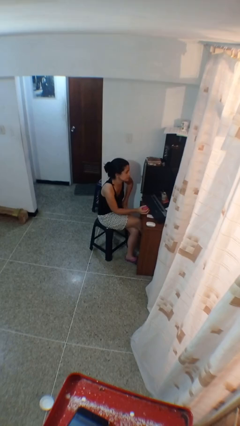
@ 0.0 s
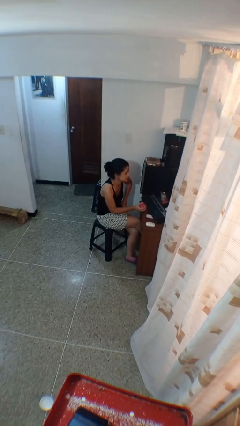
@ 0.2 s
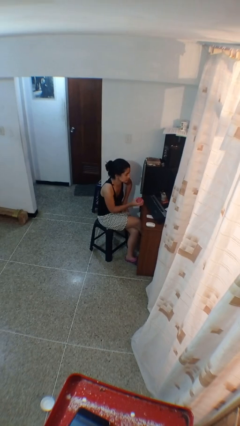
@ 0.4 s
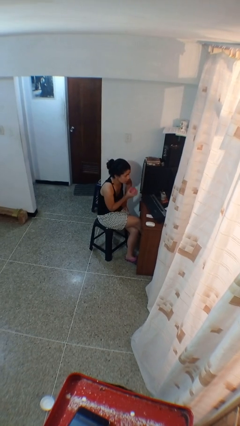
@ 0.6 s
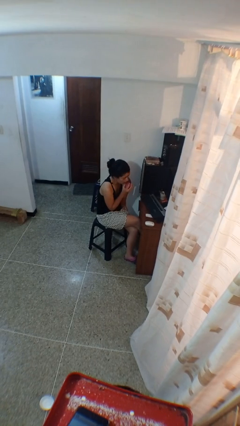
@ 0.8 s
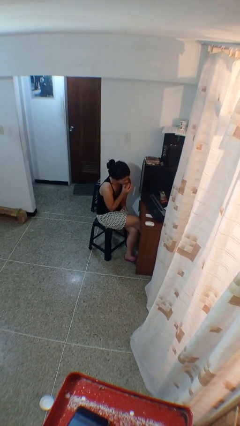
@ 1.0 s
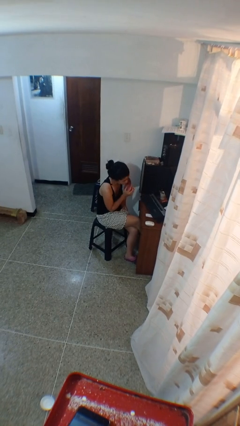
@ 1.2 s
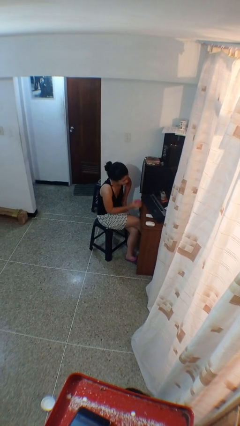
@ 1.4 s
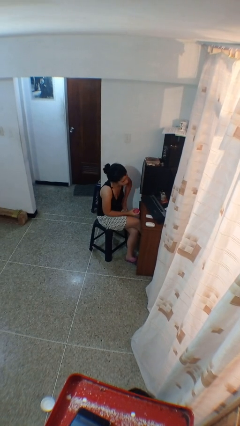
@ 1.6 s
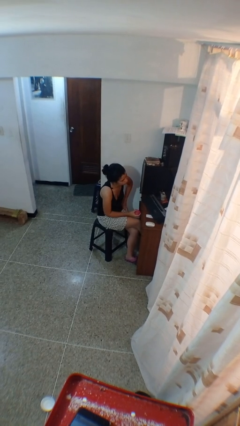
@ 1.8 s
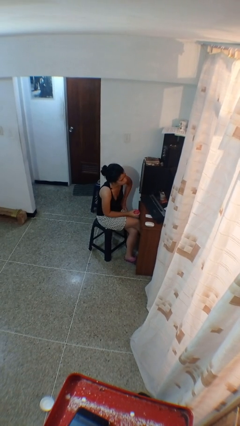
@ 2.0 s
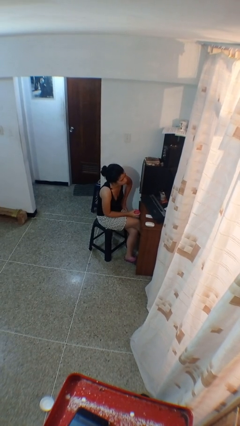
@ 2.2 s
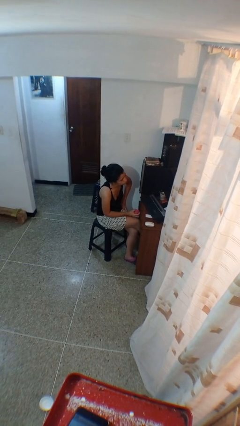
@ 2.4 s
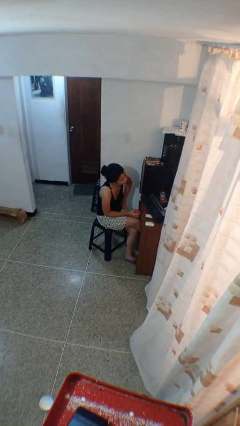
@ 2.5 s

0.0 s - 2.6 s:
person eats apple

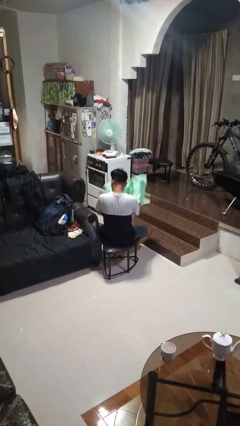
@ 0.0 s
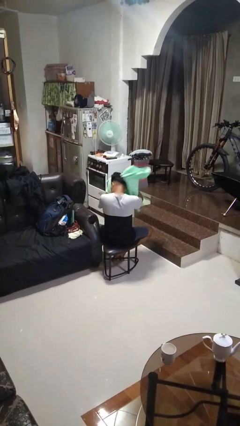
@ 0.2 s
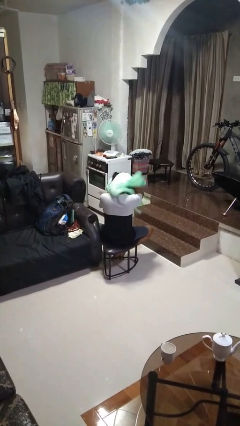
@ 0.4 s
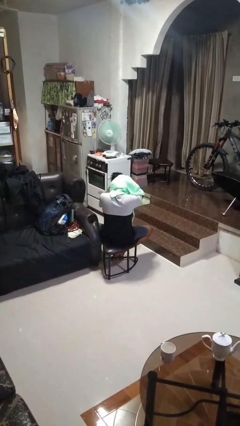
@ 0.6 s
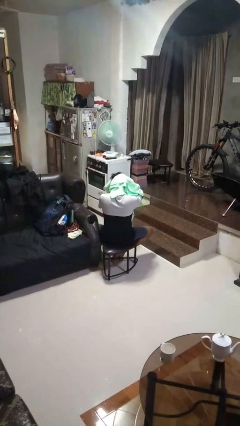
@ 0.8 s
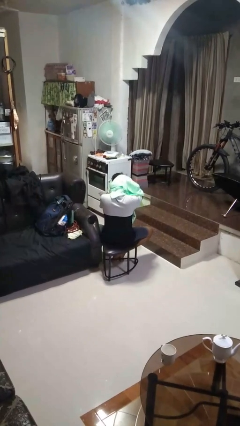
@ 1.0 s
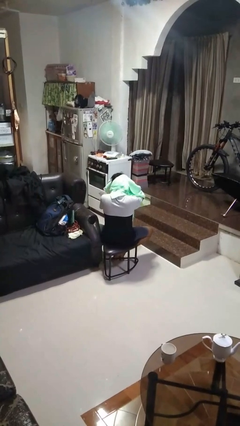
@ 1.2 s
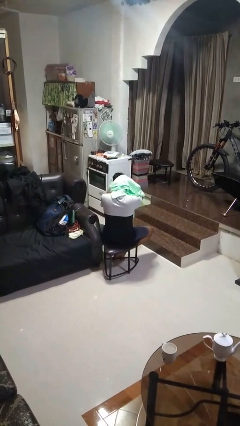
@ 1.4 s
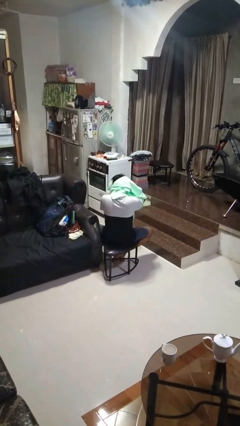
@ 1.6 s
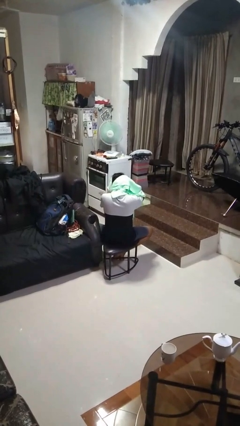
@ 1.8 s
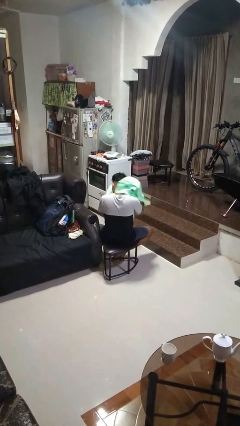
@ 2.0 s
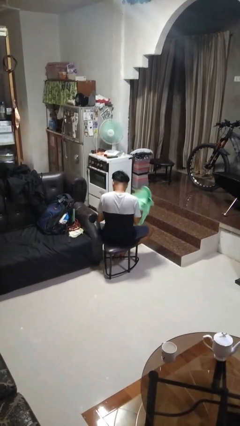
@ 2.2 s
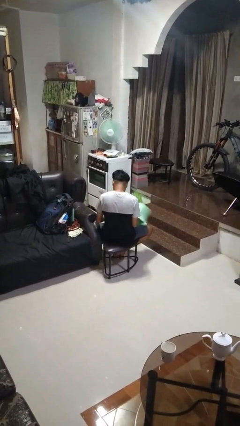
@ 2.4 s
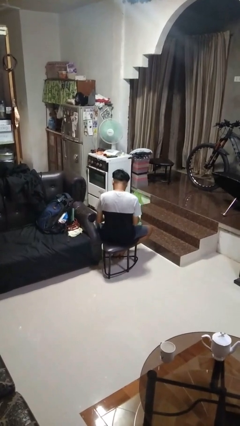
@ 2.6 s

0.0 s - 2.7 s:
person dries hair with towel

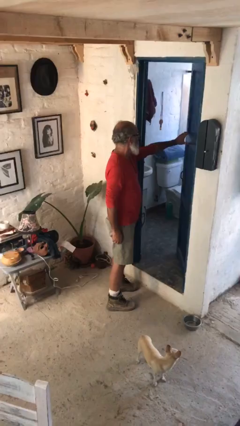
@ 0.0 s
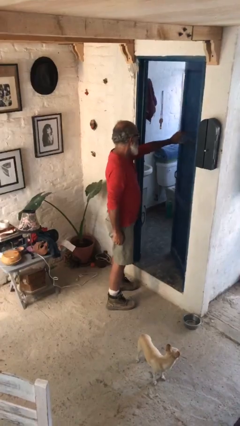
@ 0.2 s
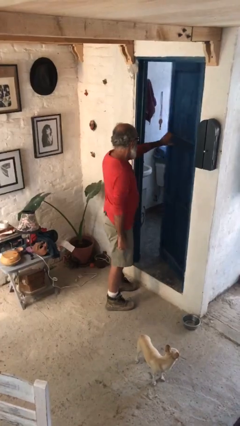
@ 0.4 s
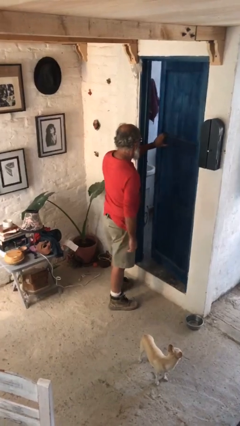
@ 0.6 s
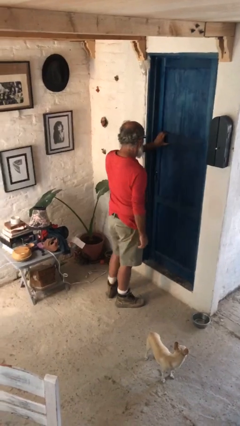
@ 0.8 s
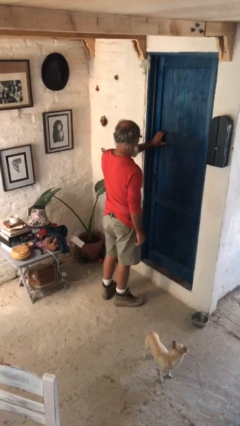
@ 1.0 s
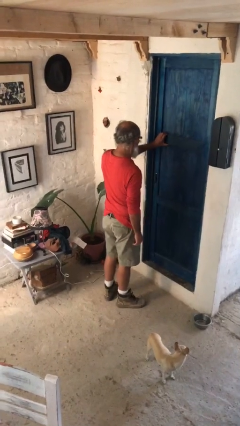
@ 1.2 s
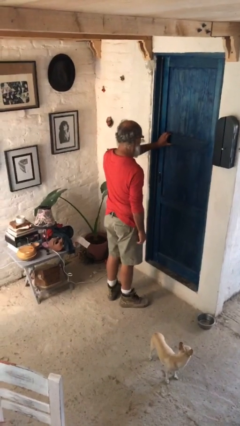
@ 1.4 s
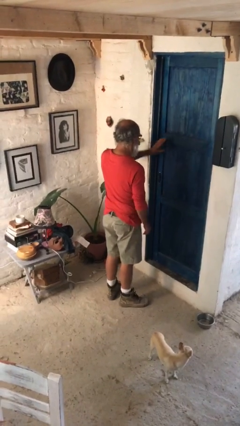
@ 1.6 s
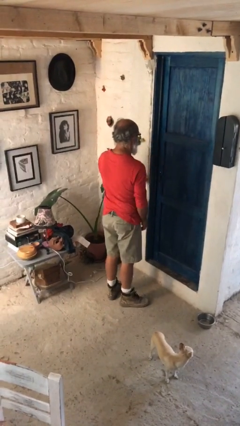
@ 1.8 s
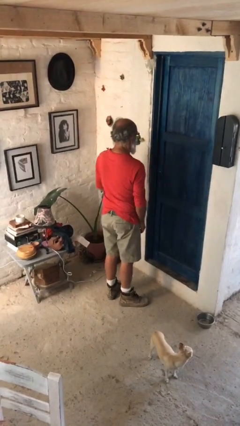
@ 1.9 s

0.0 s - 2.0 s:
person closes facility door

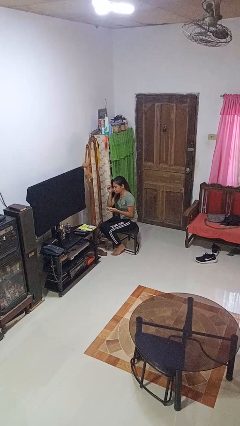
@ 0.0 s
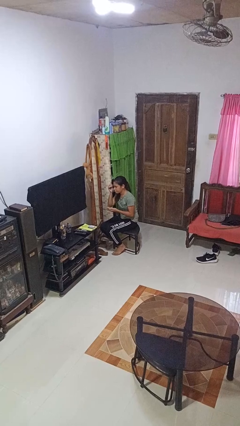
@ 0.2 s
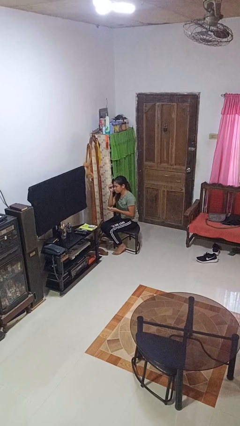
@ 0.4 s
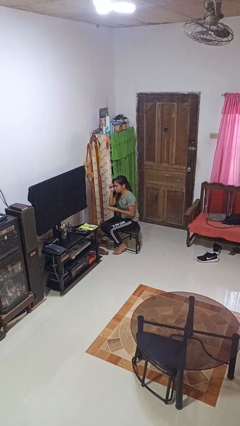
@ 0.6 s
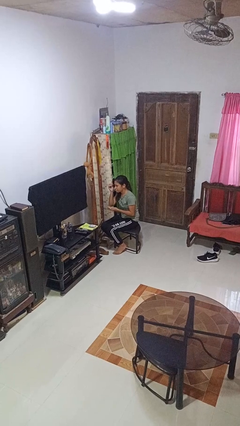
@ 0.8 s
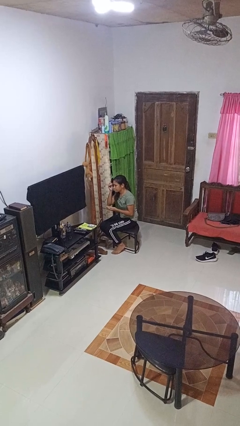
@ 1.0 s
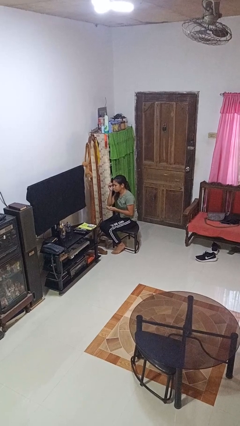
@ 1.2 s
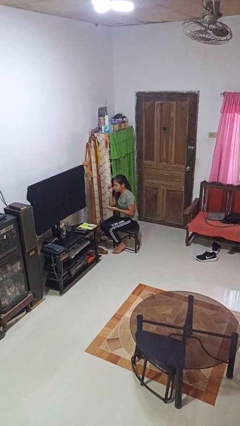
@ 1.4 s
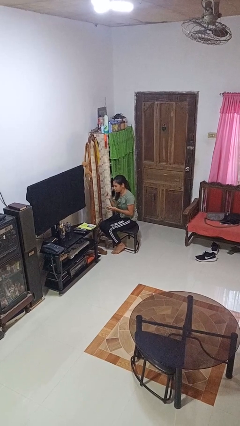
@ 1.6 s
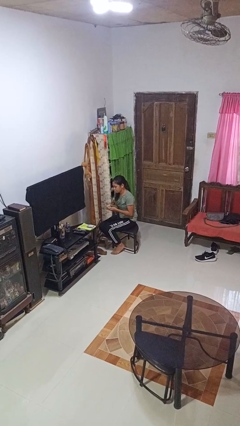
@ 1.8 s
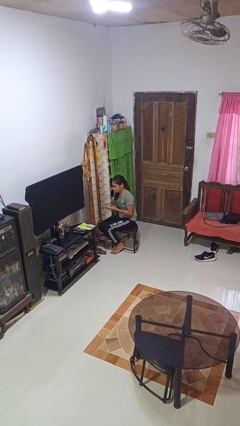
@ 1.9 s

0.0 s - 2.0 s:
person applies eye makeup

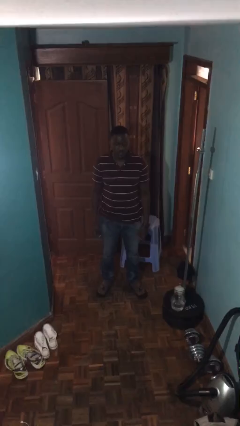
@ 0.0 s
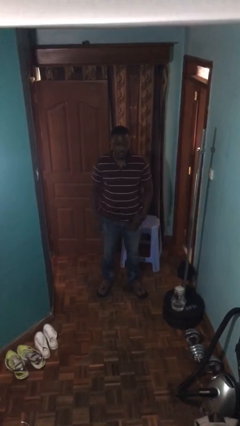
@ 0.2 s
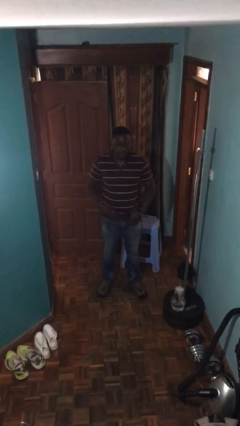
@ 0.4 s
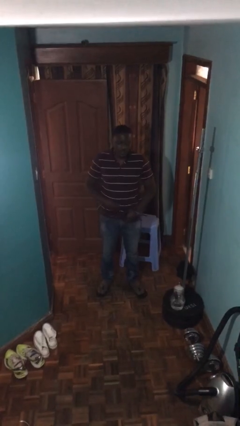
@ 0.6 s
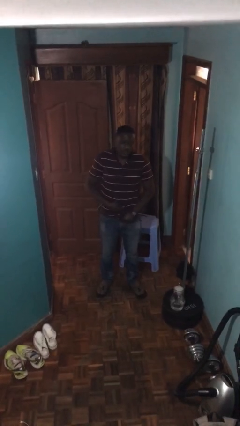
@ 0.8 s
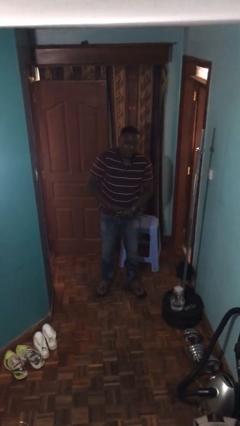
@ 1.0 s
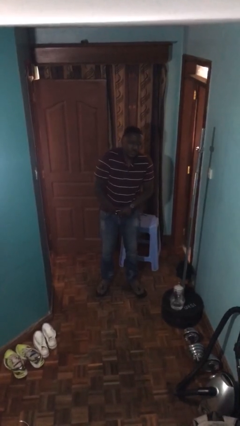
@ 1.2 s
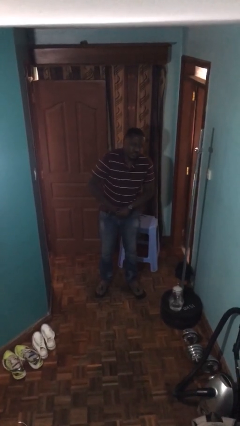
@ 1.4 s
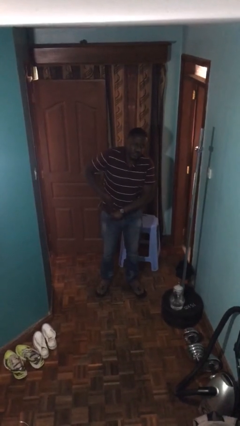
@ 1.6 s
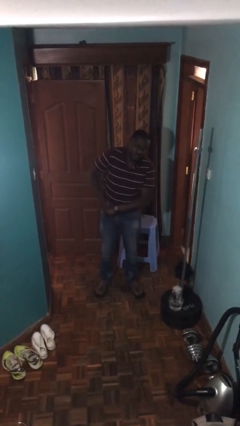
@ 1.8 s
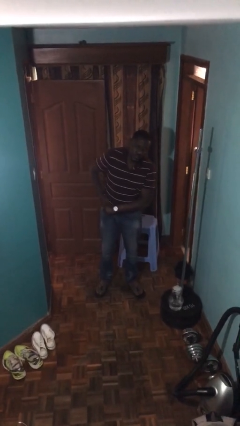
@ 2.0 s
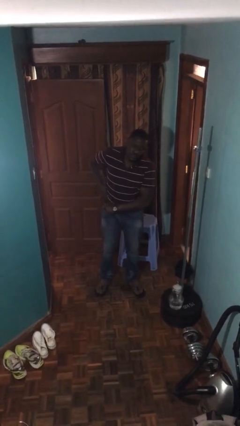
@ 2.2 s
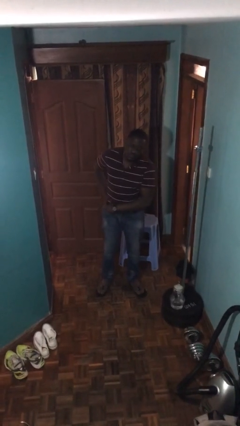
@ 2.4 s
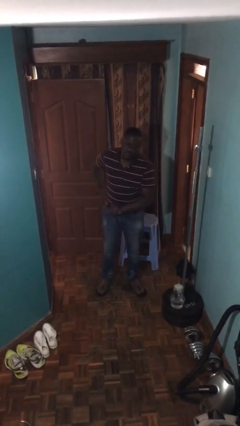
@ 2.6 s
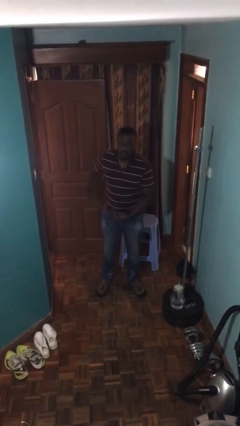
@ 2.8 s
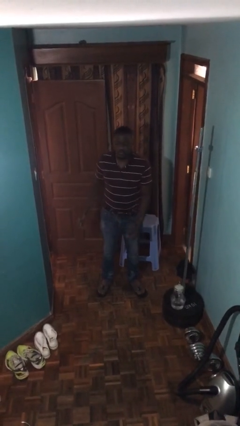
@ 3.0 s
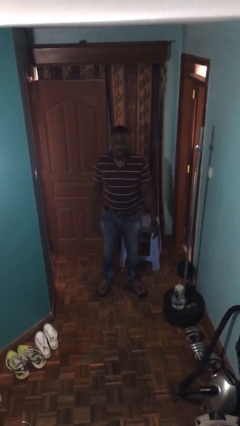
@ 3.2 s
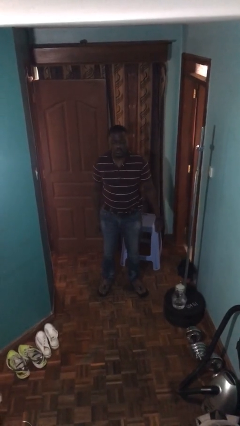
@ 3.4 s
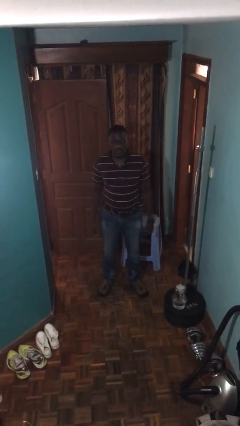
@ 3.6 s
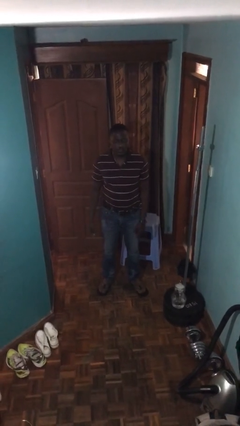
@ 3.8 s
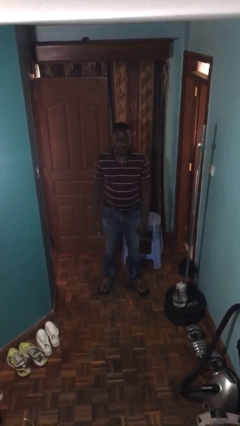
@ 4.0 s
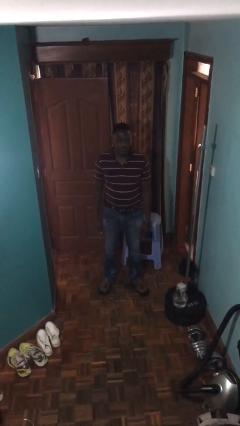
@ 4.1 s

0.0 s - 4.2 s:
person tucks in shirt

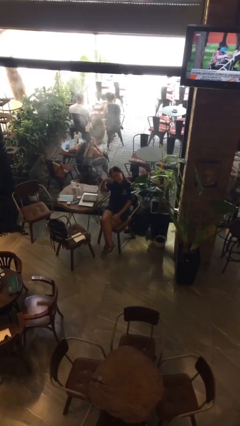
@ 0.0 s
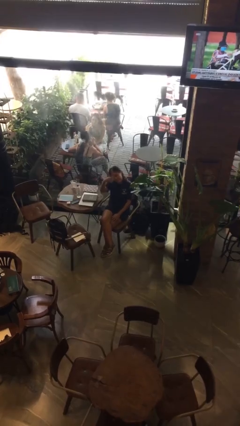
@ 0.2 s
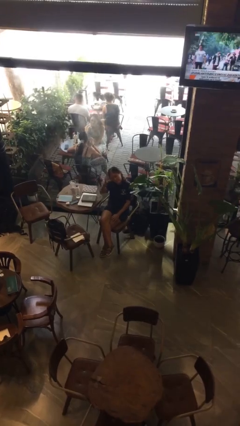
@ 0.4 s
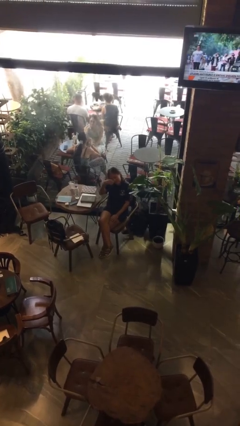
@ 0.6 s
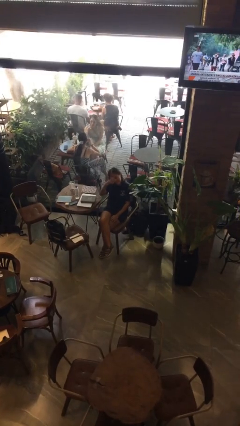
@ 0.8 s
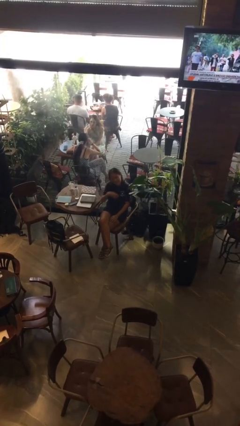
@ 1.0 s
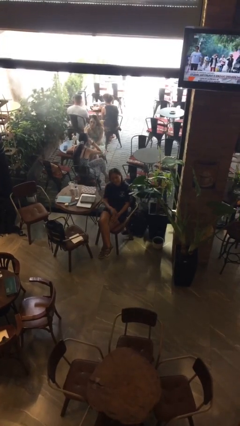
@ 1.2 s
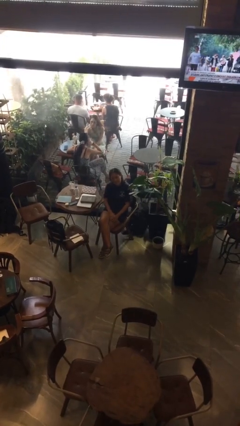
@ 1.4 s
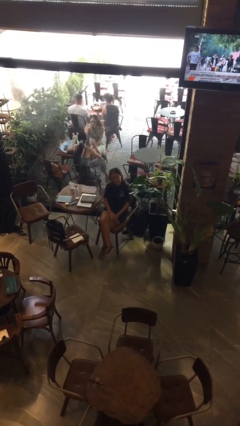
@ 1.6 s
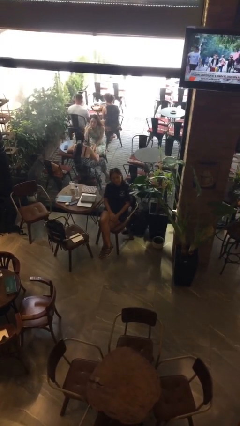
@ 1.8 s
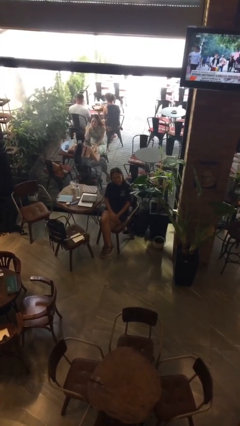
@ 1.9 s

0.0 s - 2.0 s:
person gestures come here

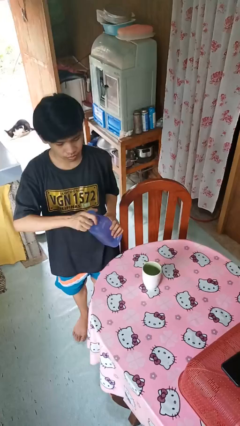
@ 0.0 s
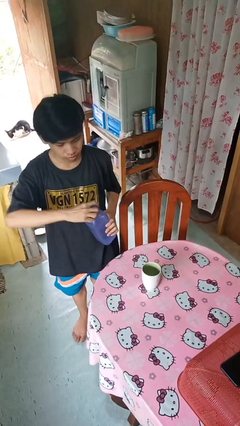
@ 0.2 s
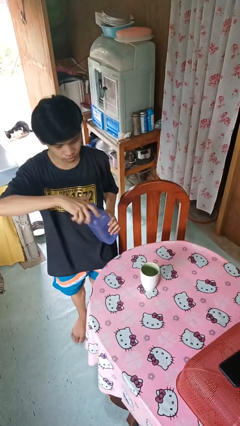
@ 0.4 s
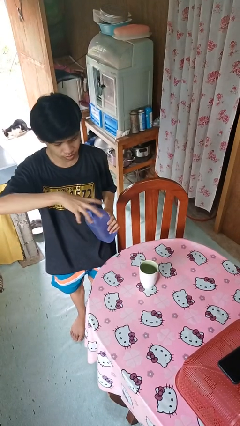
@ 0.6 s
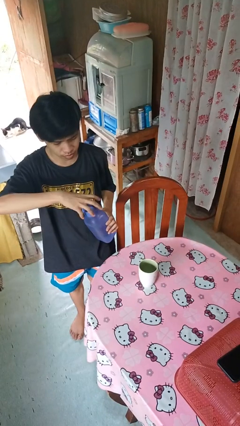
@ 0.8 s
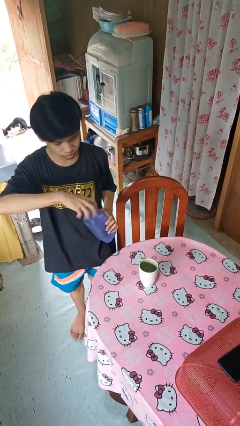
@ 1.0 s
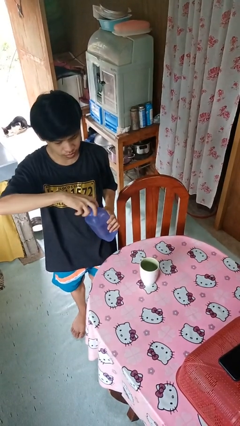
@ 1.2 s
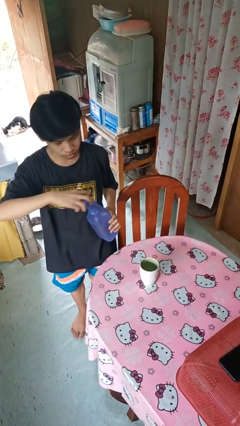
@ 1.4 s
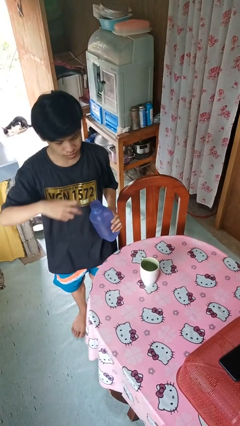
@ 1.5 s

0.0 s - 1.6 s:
person unscrews lid from bottle
